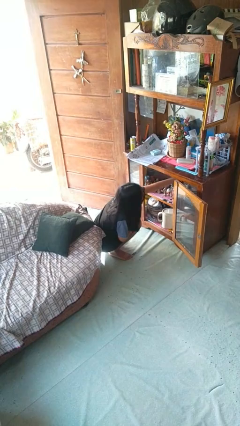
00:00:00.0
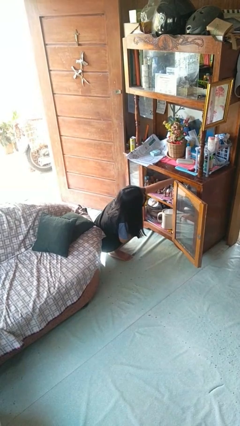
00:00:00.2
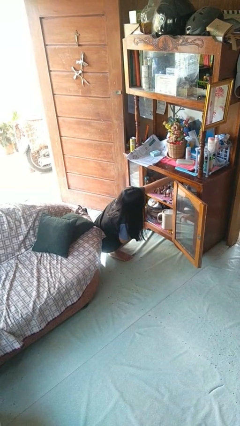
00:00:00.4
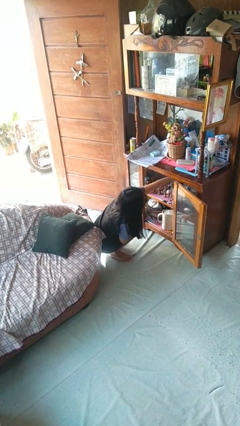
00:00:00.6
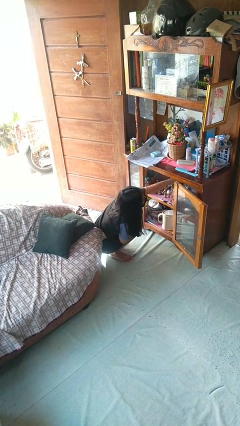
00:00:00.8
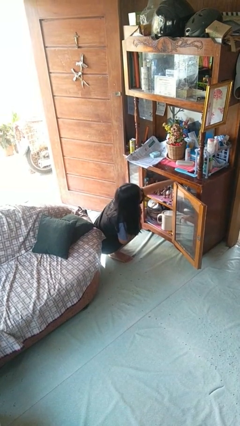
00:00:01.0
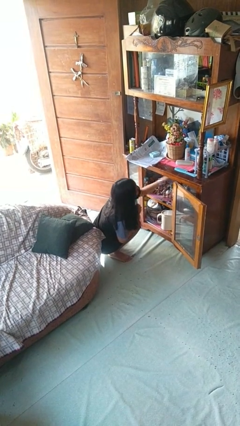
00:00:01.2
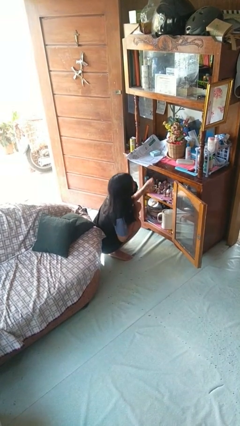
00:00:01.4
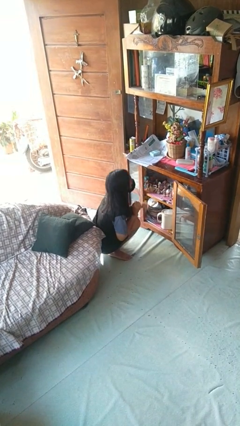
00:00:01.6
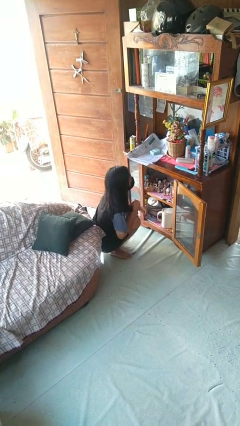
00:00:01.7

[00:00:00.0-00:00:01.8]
person searches in cabinet

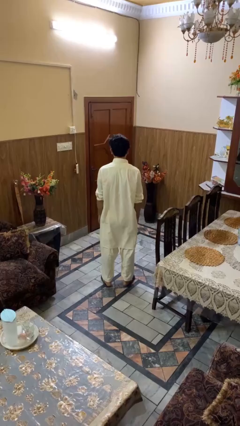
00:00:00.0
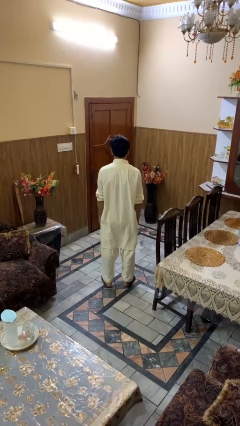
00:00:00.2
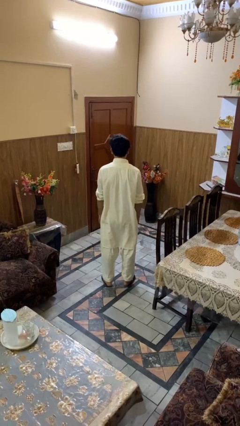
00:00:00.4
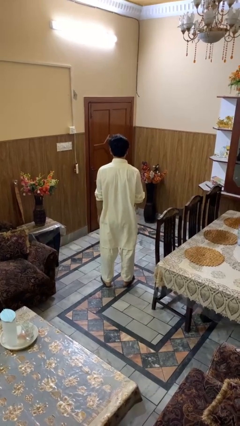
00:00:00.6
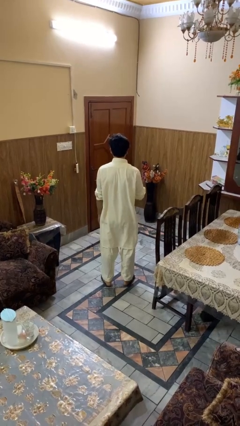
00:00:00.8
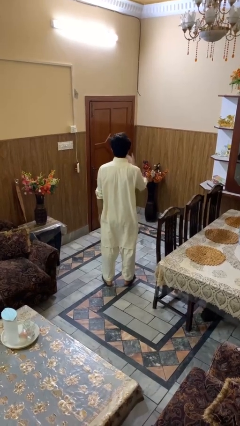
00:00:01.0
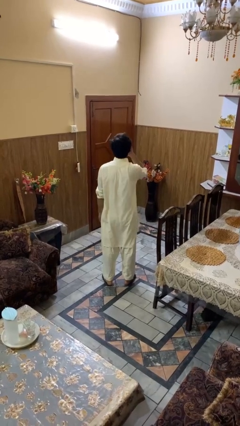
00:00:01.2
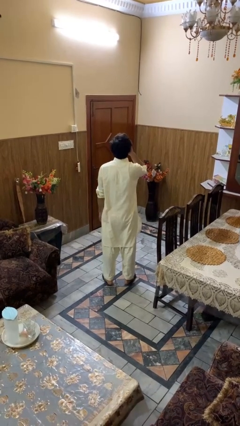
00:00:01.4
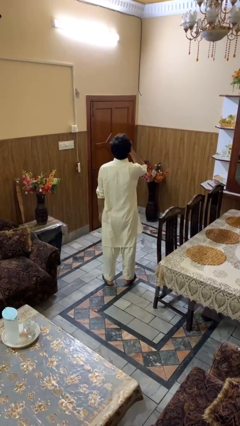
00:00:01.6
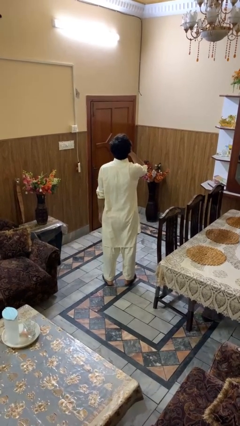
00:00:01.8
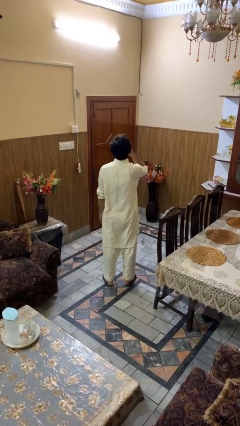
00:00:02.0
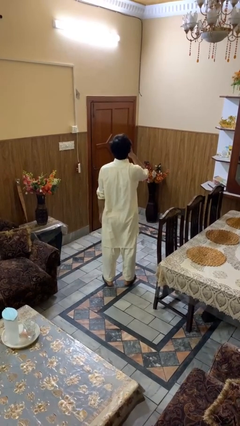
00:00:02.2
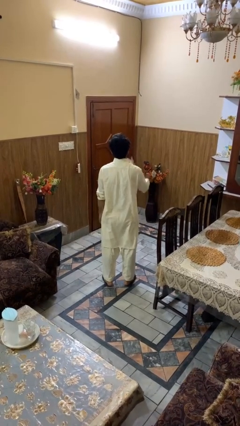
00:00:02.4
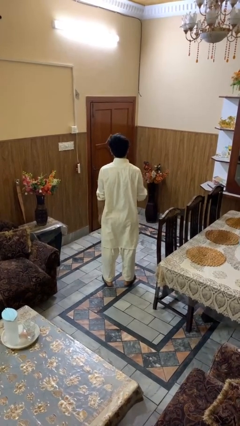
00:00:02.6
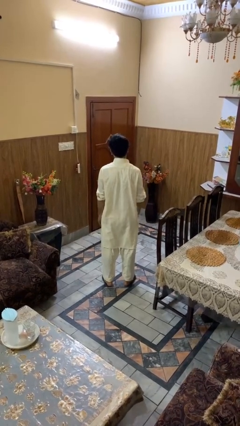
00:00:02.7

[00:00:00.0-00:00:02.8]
person yawns

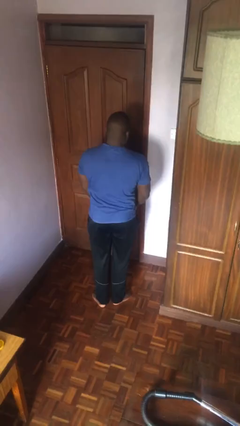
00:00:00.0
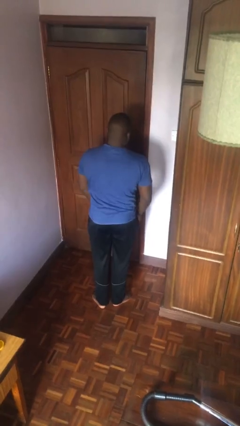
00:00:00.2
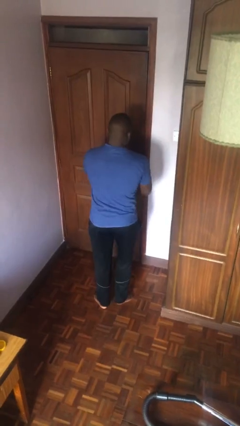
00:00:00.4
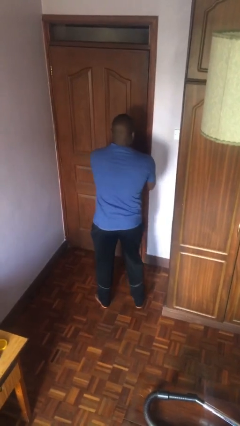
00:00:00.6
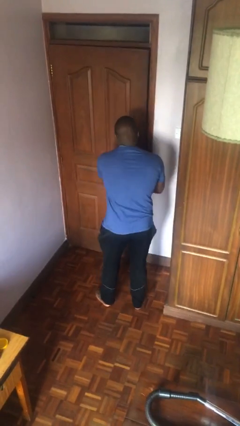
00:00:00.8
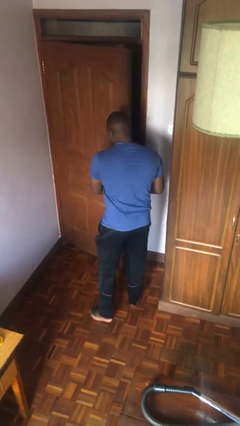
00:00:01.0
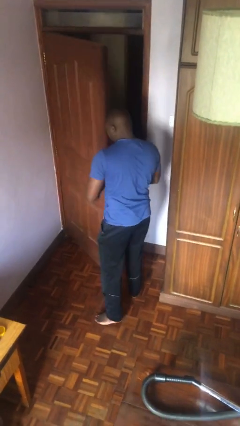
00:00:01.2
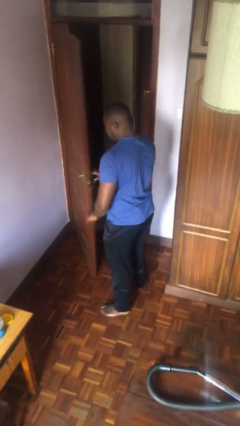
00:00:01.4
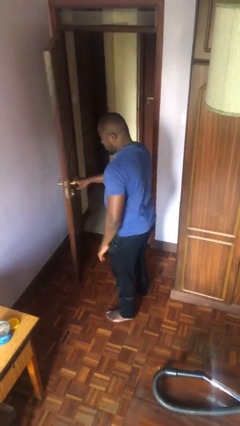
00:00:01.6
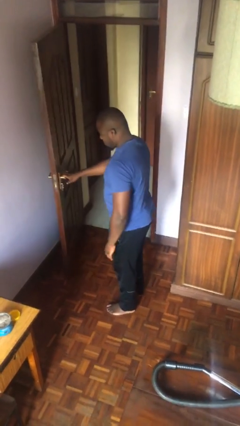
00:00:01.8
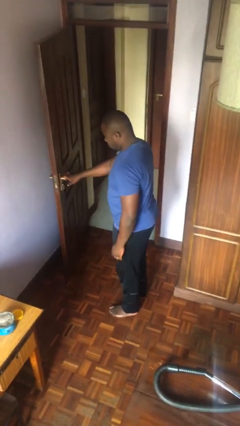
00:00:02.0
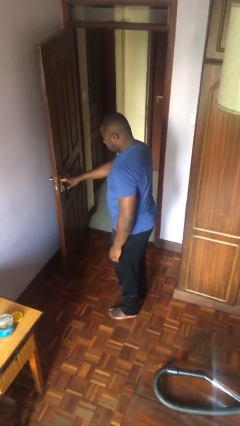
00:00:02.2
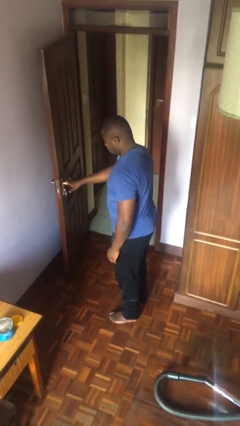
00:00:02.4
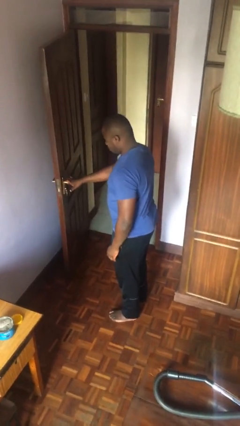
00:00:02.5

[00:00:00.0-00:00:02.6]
person opens facility door

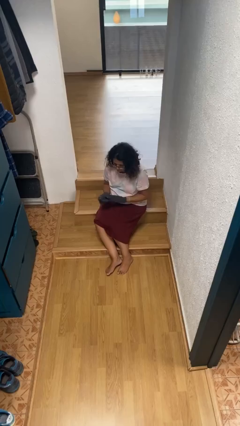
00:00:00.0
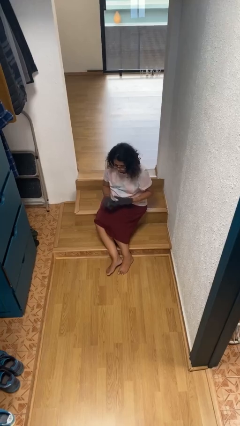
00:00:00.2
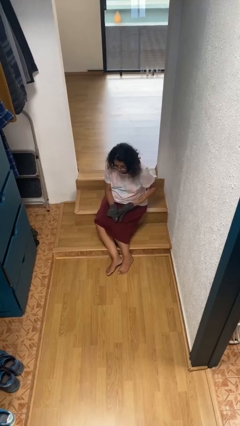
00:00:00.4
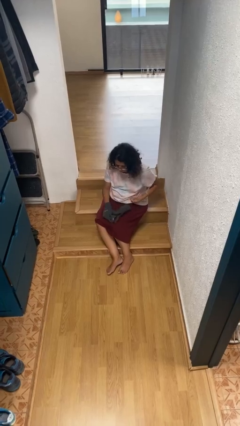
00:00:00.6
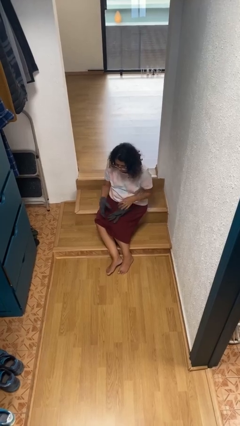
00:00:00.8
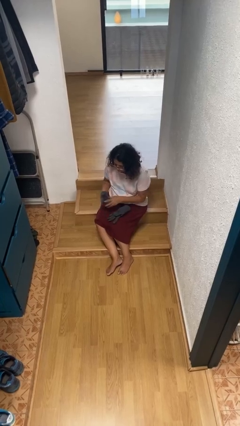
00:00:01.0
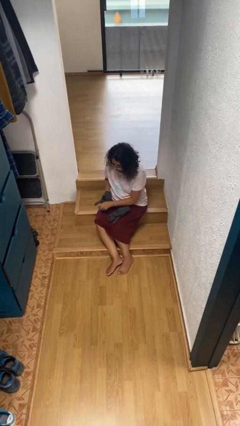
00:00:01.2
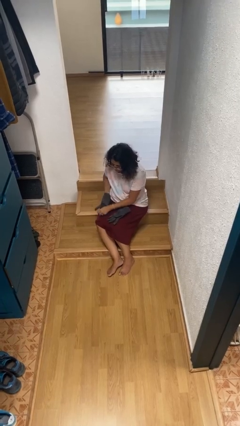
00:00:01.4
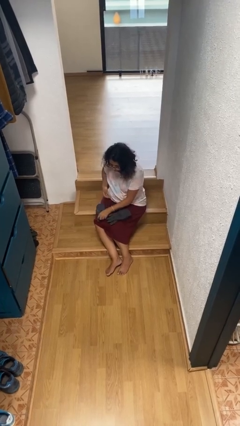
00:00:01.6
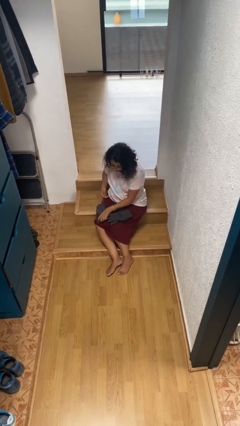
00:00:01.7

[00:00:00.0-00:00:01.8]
person takes off gloves

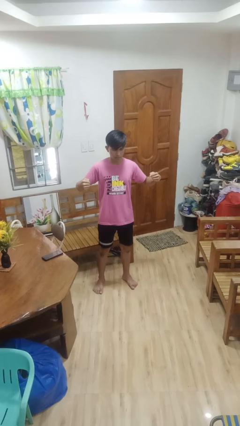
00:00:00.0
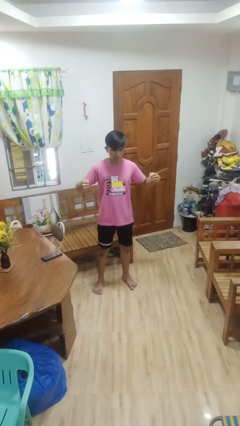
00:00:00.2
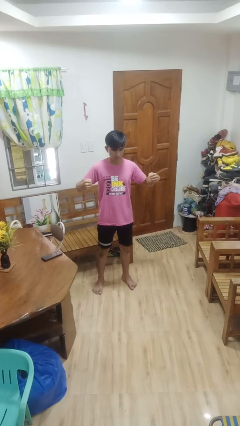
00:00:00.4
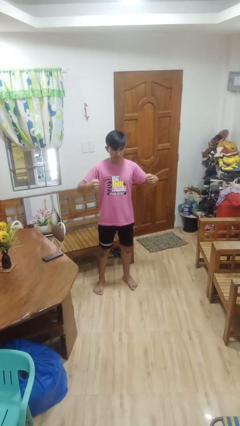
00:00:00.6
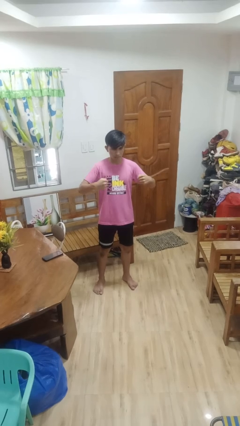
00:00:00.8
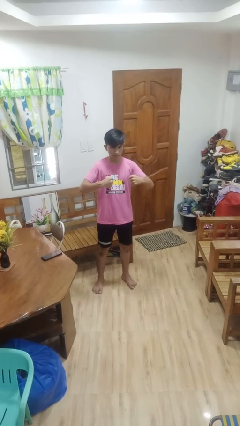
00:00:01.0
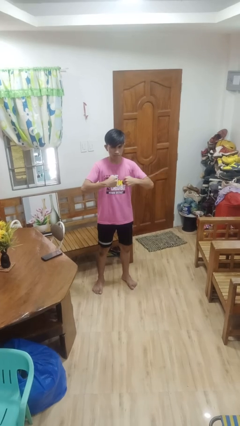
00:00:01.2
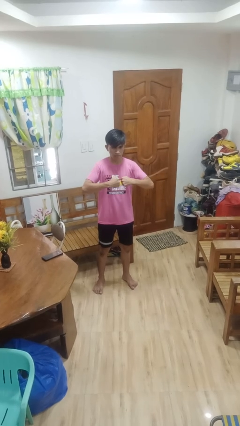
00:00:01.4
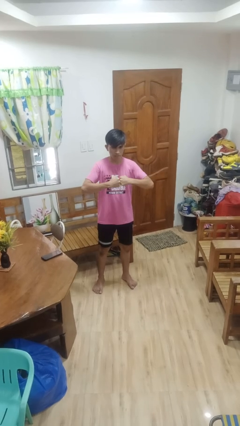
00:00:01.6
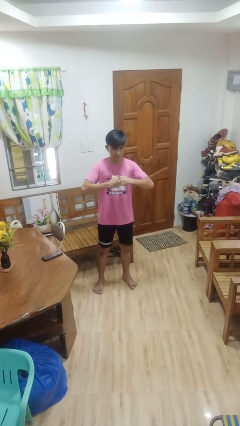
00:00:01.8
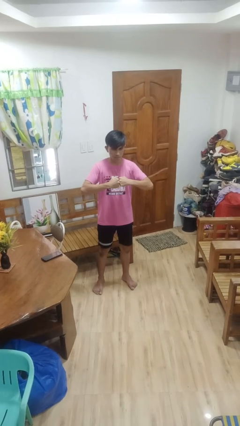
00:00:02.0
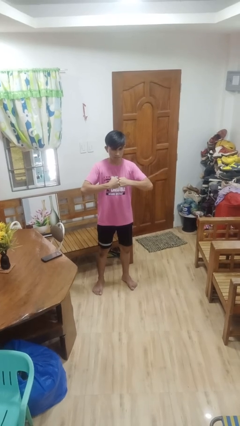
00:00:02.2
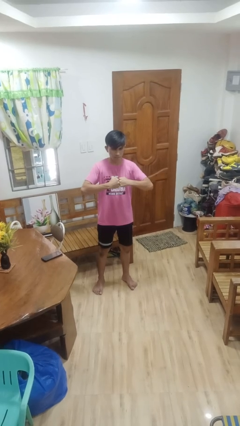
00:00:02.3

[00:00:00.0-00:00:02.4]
person gestures zoom out

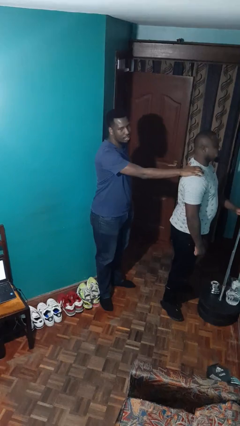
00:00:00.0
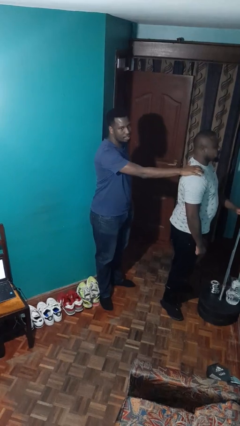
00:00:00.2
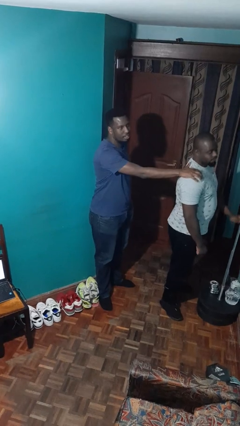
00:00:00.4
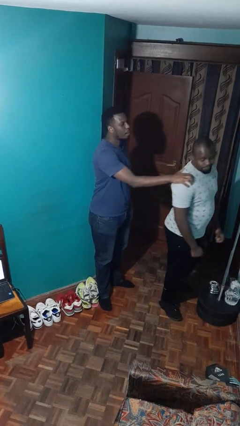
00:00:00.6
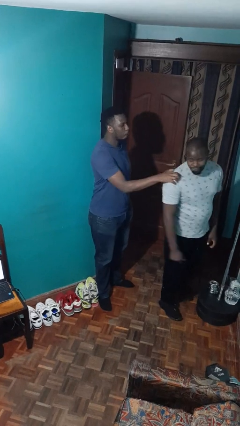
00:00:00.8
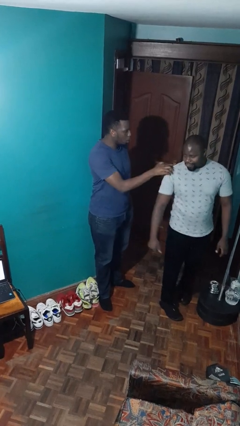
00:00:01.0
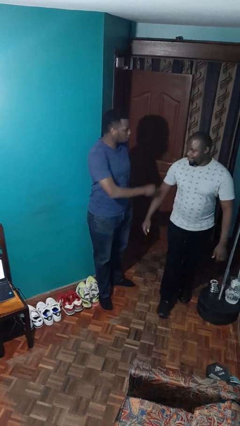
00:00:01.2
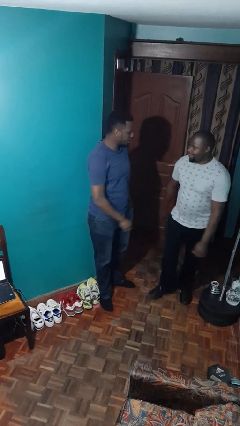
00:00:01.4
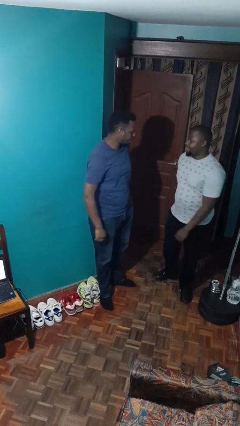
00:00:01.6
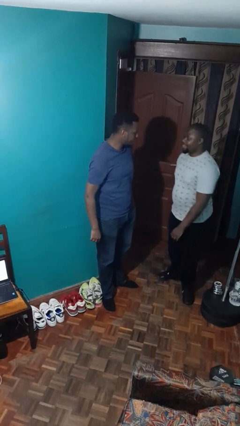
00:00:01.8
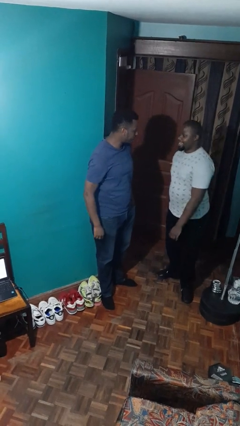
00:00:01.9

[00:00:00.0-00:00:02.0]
person spins person around

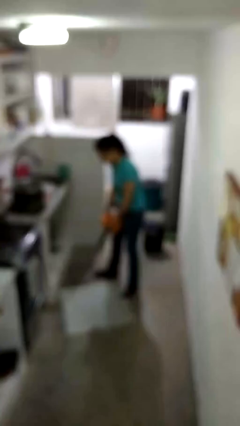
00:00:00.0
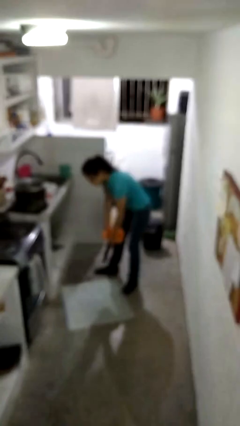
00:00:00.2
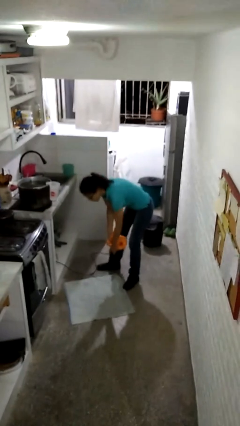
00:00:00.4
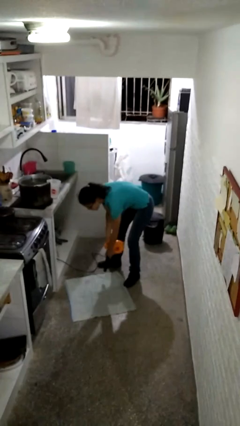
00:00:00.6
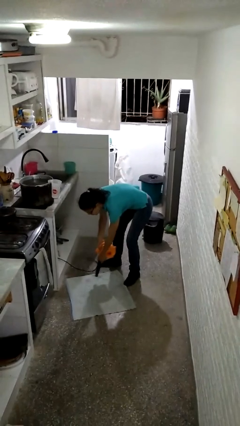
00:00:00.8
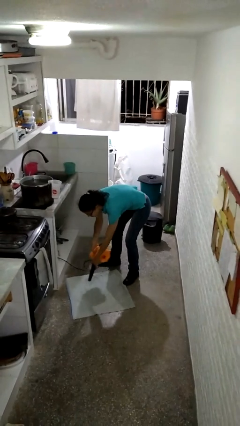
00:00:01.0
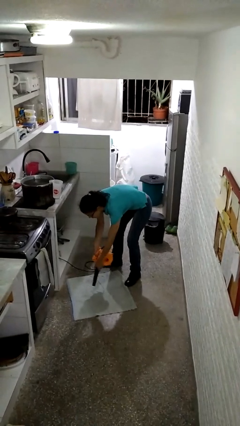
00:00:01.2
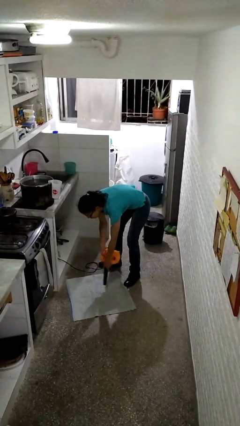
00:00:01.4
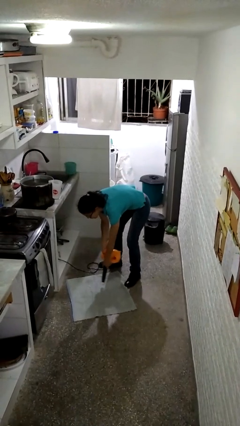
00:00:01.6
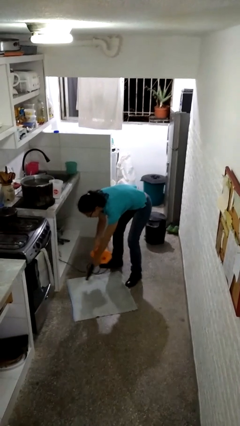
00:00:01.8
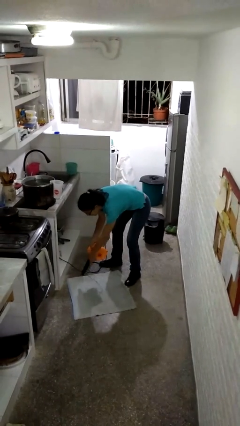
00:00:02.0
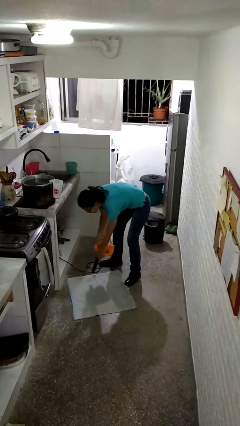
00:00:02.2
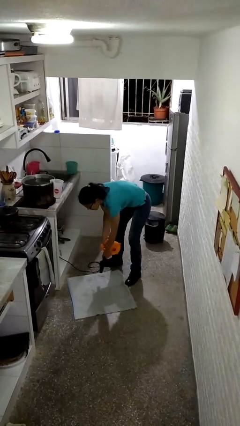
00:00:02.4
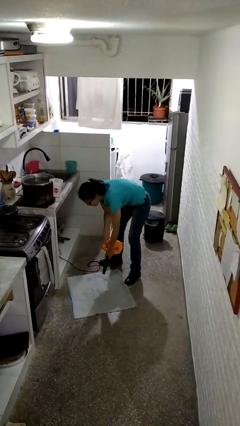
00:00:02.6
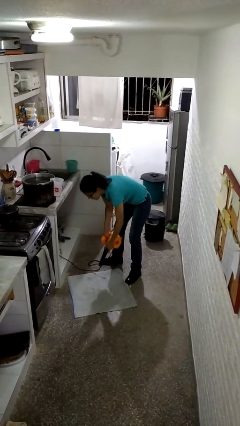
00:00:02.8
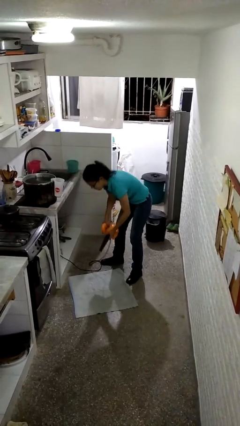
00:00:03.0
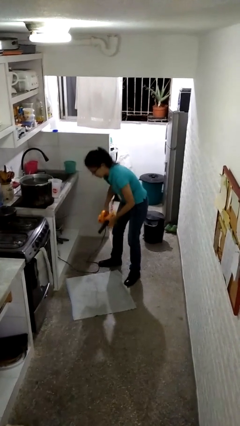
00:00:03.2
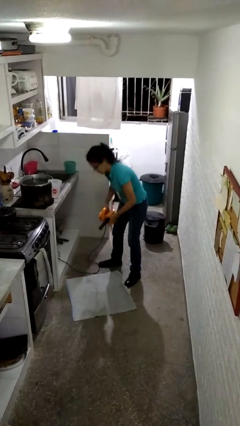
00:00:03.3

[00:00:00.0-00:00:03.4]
person vacuums carpet
